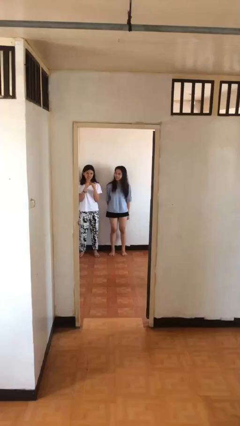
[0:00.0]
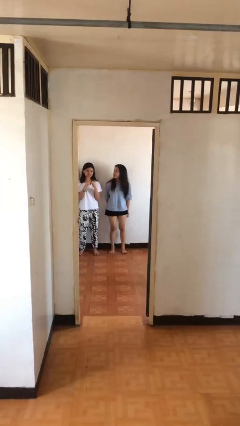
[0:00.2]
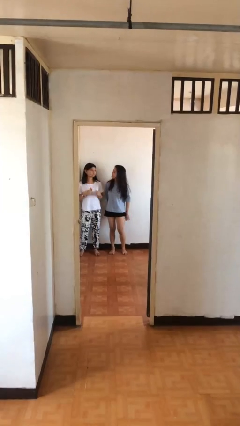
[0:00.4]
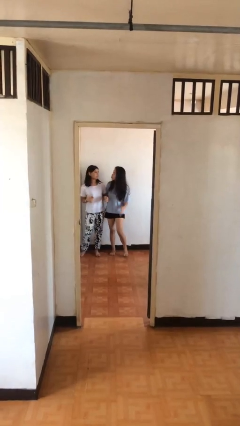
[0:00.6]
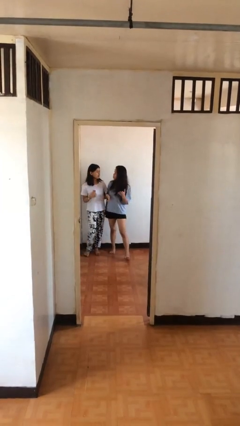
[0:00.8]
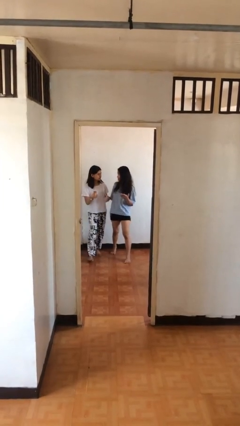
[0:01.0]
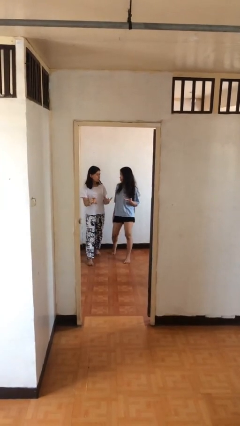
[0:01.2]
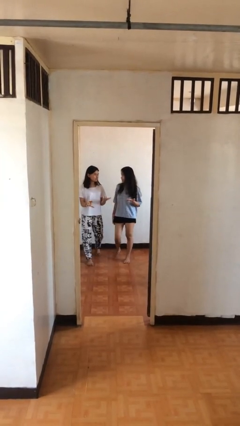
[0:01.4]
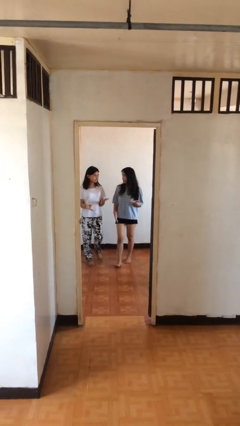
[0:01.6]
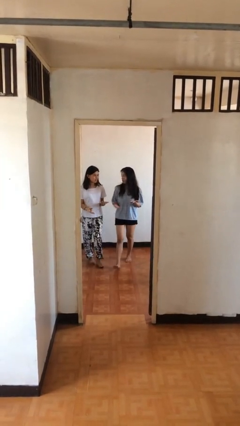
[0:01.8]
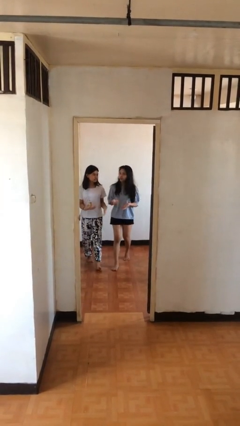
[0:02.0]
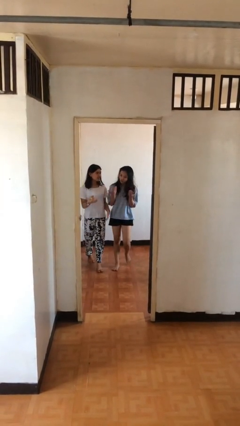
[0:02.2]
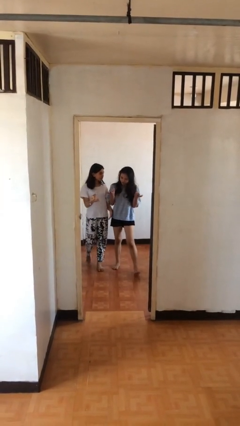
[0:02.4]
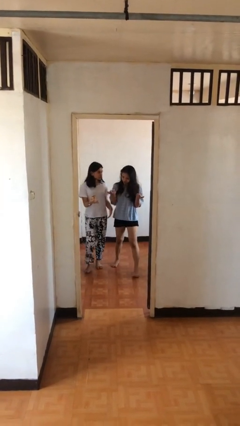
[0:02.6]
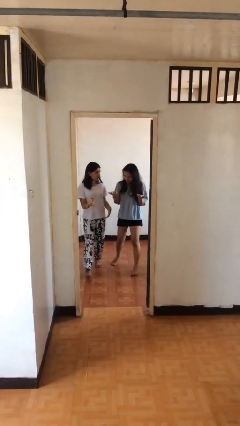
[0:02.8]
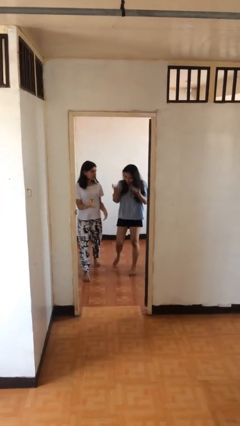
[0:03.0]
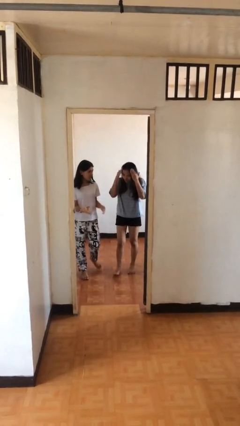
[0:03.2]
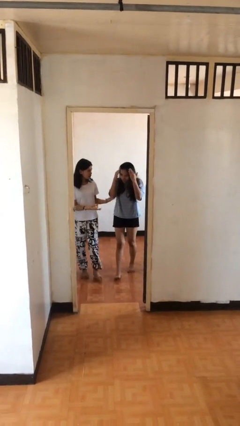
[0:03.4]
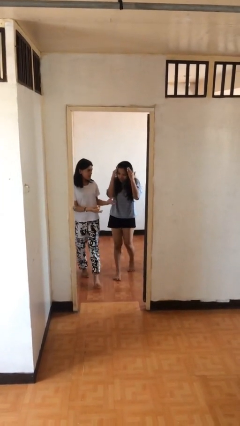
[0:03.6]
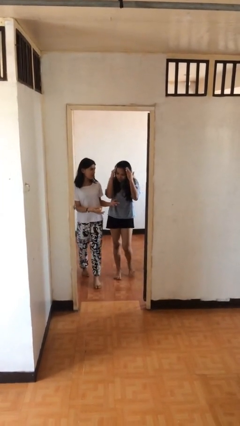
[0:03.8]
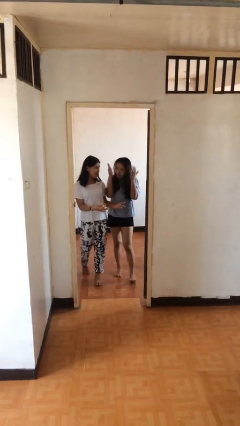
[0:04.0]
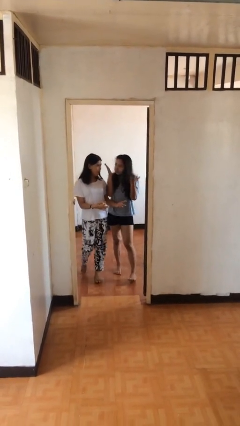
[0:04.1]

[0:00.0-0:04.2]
person talks to person

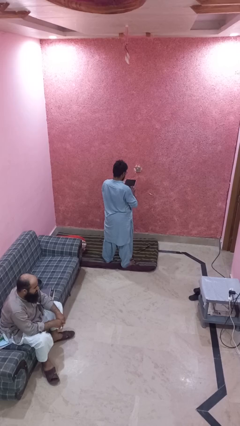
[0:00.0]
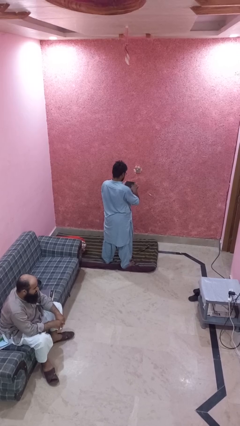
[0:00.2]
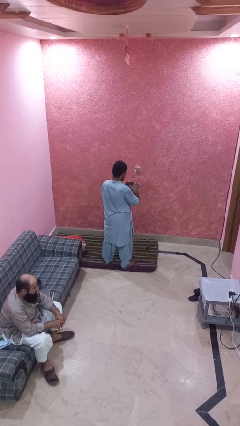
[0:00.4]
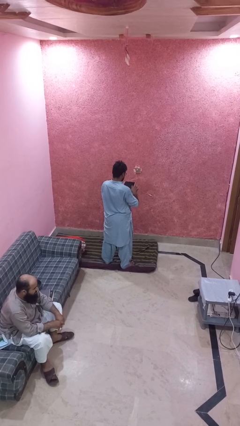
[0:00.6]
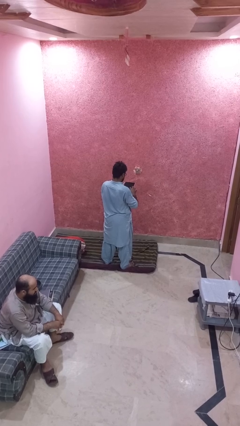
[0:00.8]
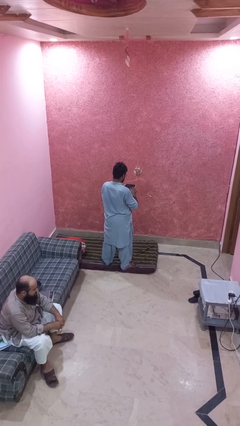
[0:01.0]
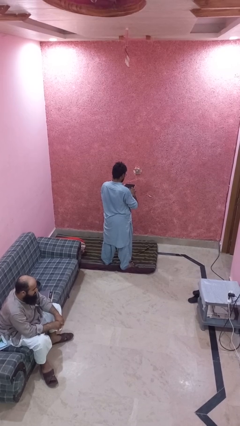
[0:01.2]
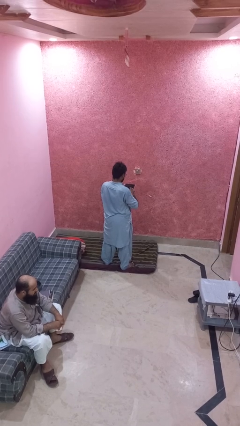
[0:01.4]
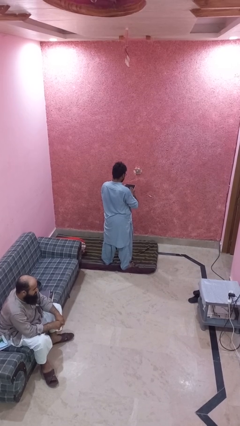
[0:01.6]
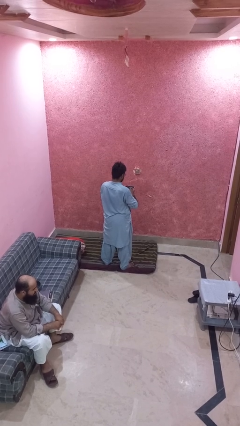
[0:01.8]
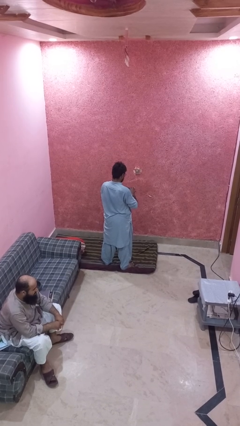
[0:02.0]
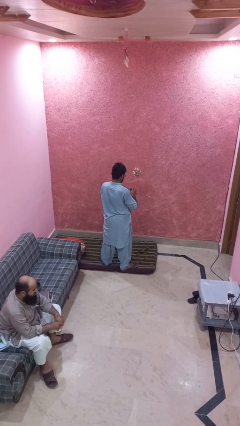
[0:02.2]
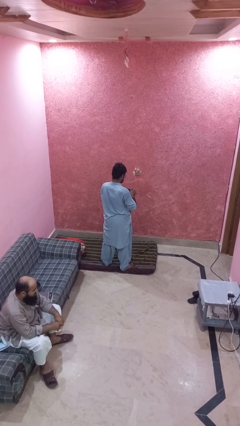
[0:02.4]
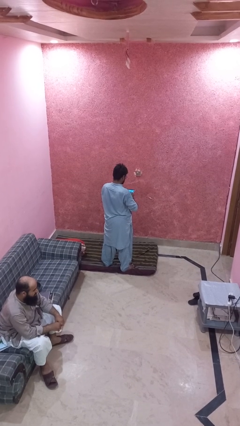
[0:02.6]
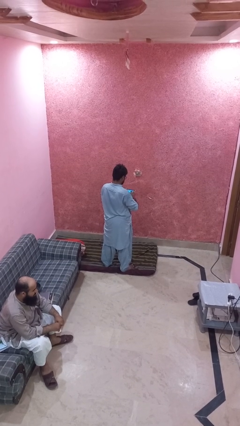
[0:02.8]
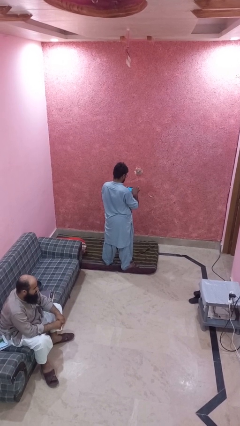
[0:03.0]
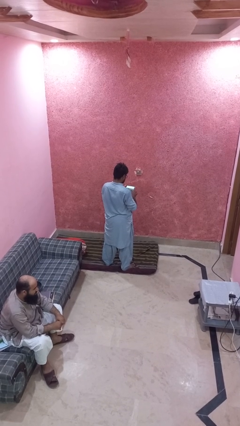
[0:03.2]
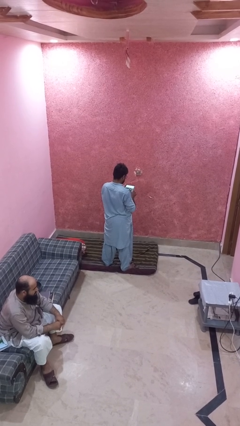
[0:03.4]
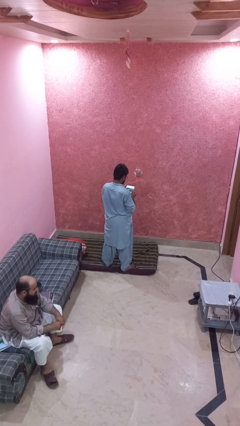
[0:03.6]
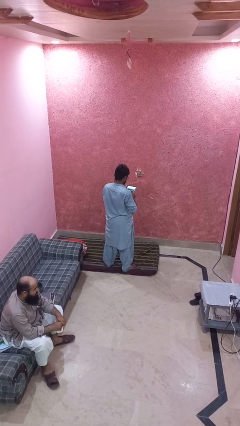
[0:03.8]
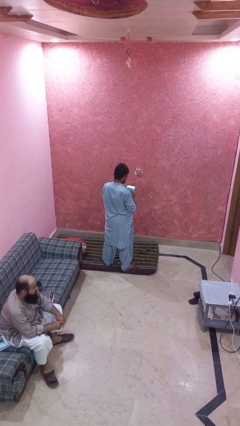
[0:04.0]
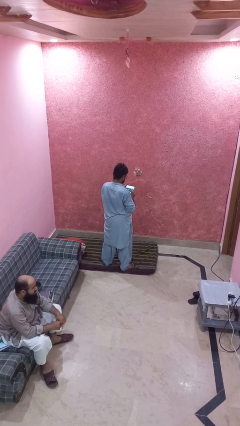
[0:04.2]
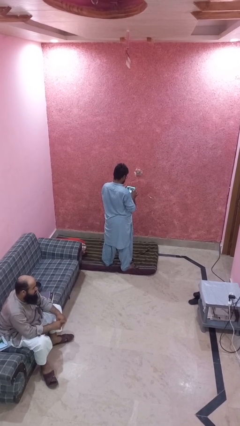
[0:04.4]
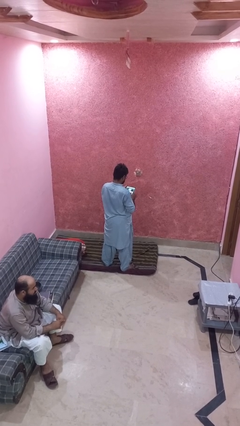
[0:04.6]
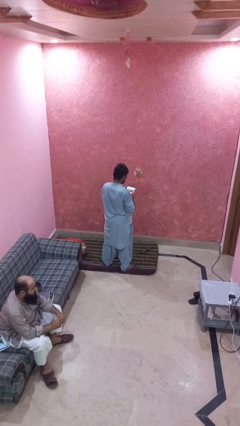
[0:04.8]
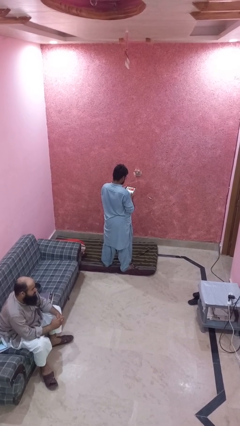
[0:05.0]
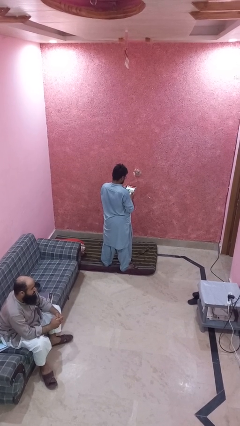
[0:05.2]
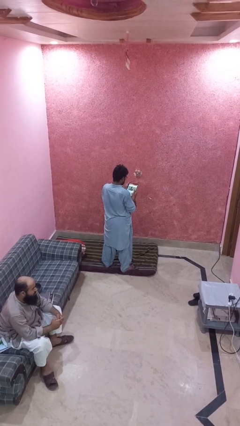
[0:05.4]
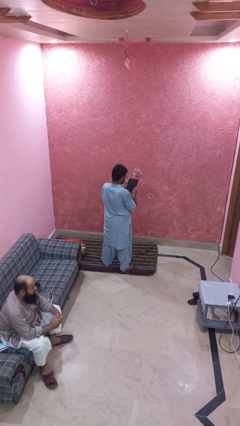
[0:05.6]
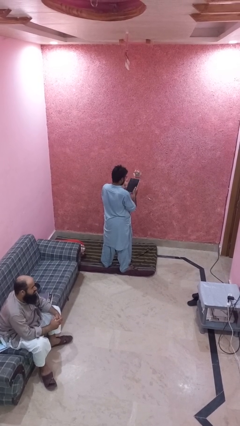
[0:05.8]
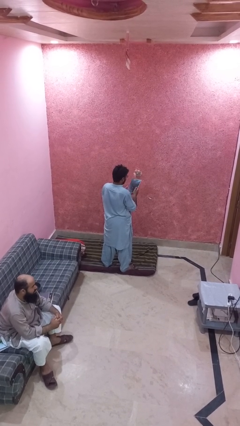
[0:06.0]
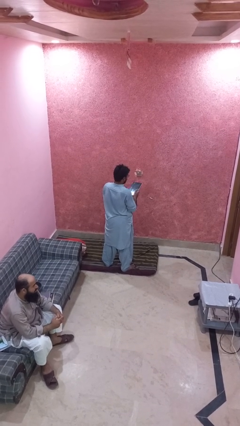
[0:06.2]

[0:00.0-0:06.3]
person interacts with tablet

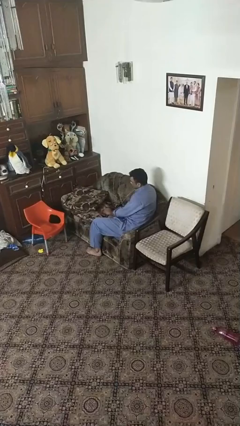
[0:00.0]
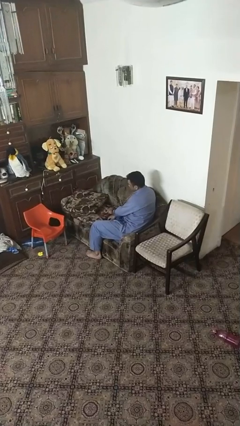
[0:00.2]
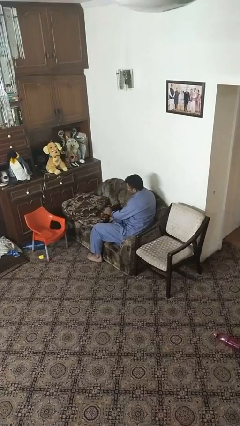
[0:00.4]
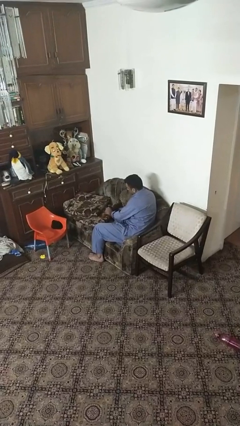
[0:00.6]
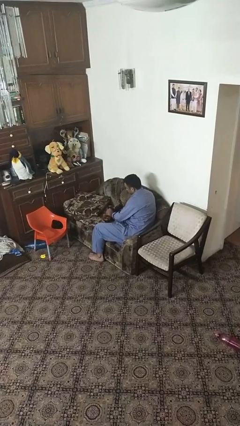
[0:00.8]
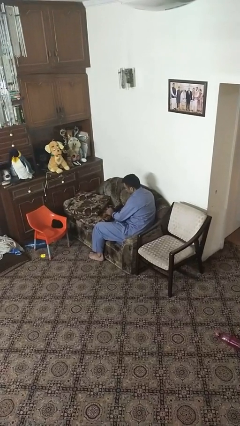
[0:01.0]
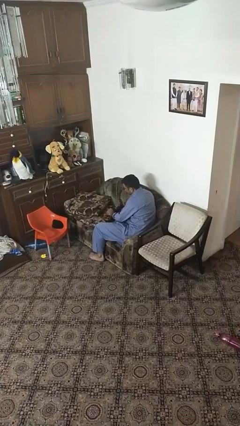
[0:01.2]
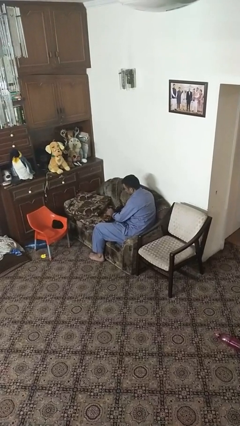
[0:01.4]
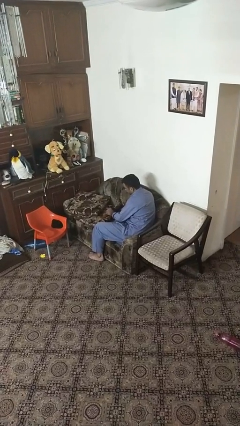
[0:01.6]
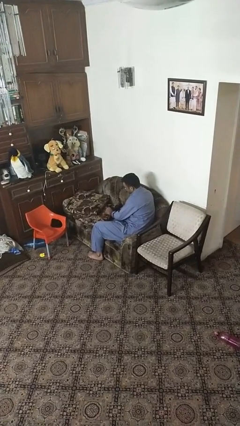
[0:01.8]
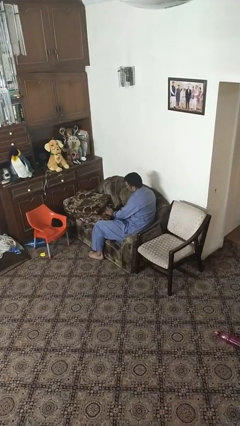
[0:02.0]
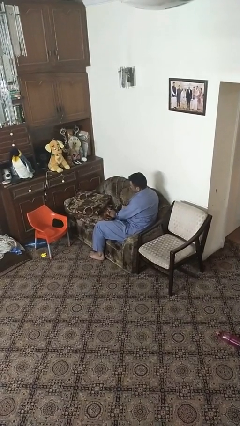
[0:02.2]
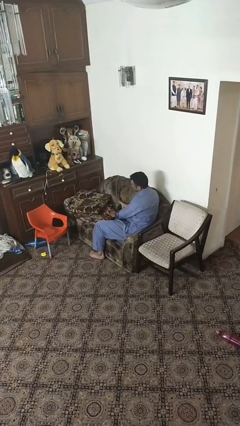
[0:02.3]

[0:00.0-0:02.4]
person searches in couch

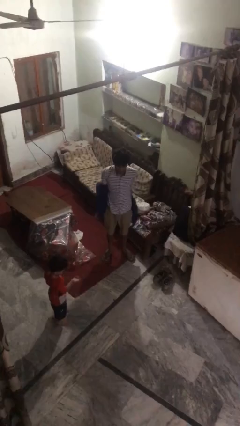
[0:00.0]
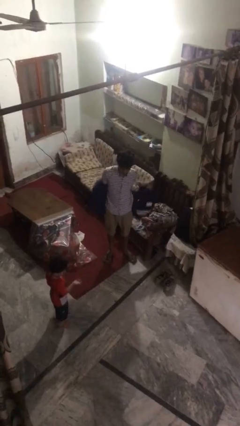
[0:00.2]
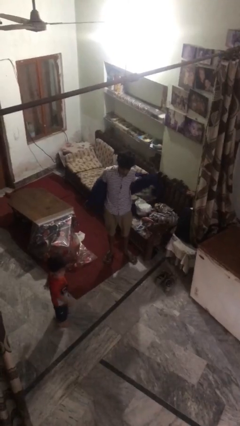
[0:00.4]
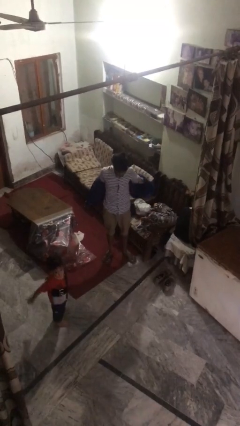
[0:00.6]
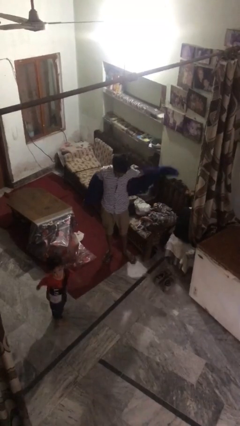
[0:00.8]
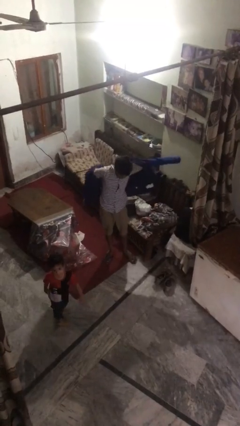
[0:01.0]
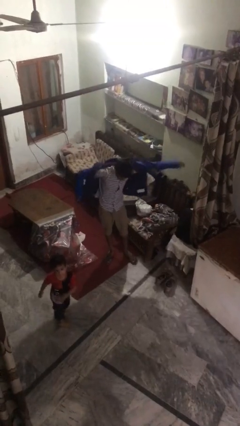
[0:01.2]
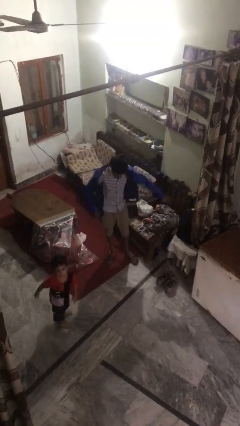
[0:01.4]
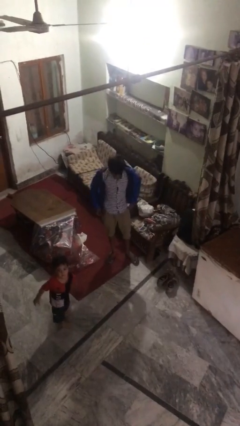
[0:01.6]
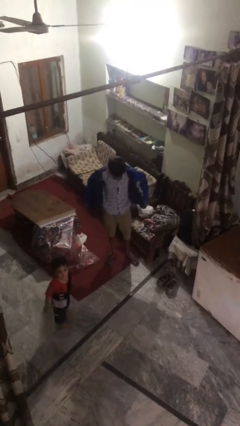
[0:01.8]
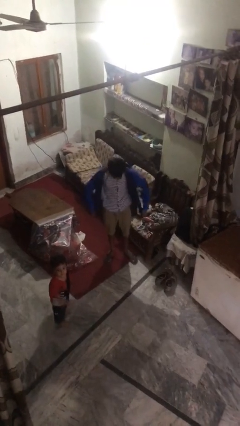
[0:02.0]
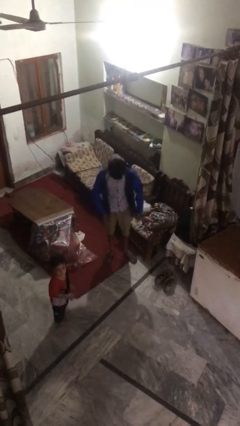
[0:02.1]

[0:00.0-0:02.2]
person puts on jacket

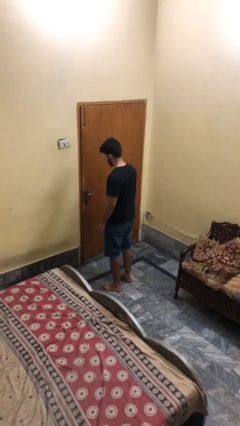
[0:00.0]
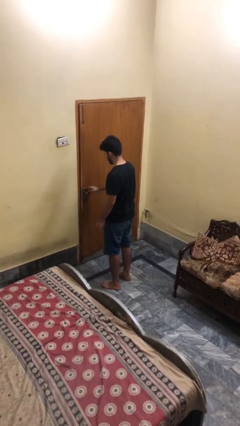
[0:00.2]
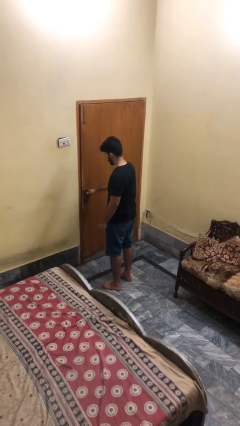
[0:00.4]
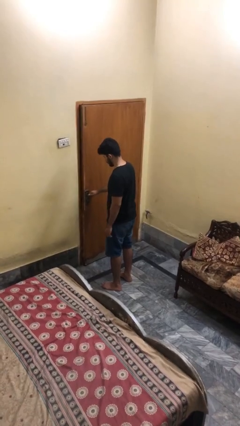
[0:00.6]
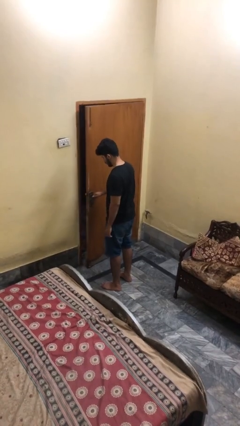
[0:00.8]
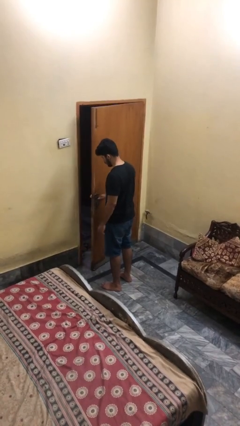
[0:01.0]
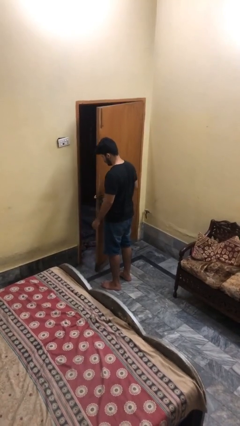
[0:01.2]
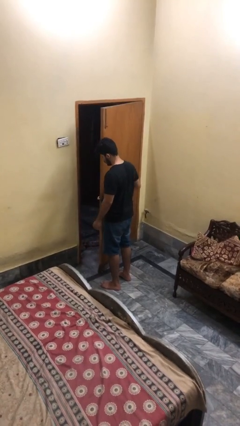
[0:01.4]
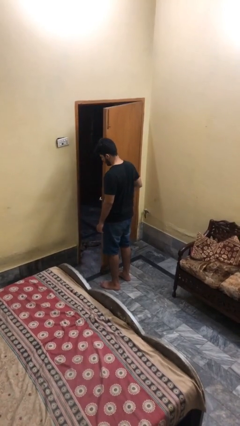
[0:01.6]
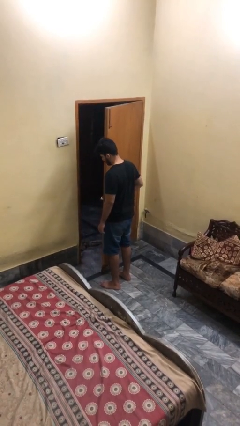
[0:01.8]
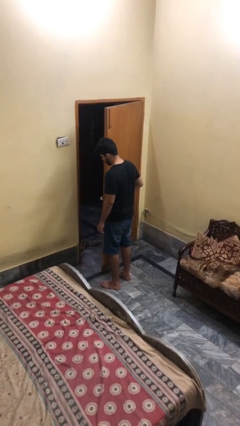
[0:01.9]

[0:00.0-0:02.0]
person opens facility door

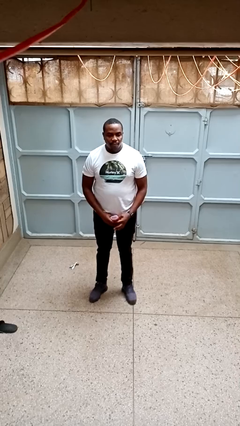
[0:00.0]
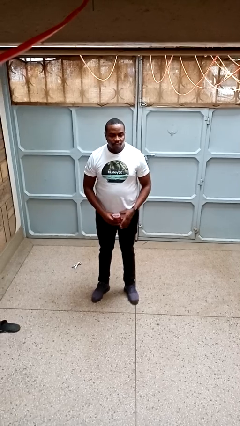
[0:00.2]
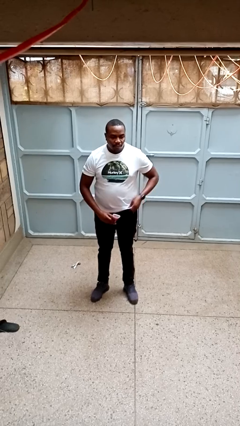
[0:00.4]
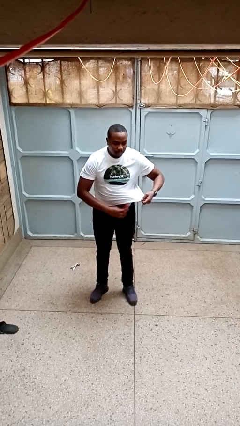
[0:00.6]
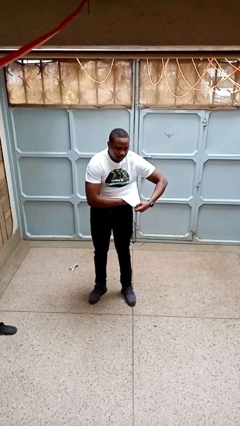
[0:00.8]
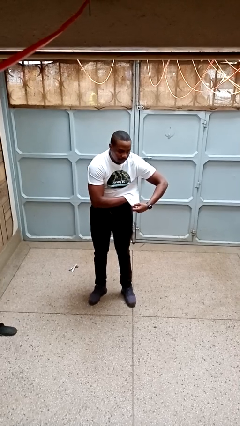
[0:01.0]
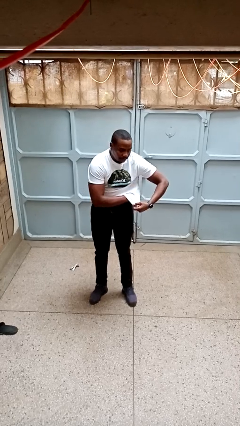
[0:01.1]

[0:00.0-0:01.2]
person applies deodorant
